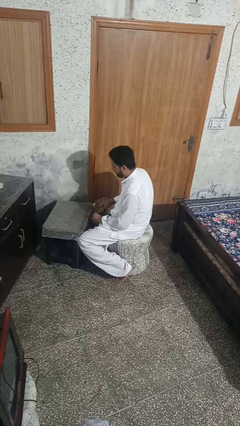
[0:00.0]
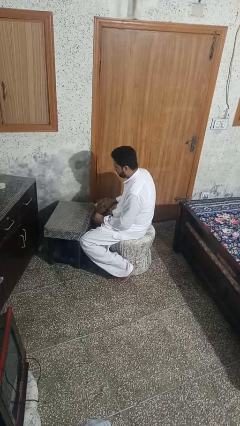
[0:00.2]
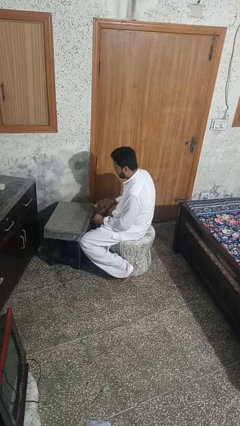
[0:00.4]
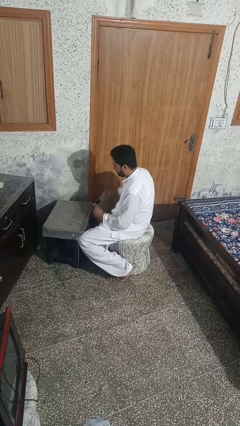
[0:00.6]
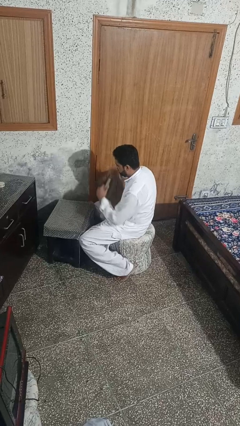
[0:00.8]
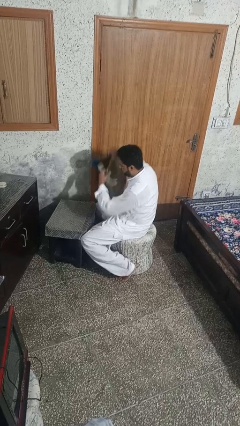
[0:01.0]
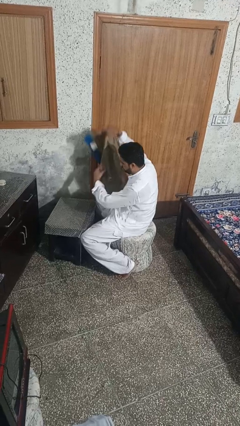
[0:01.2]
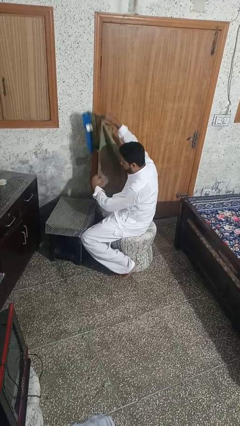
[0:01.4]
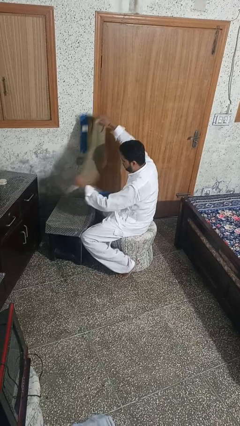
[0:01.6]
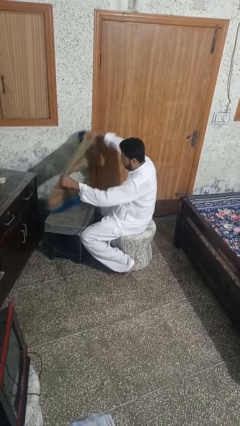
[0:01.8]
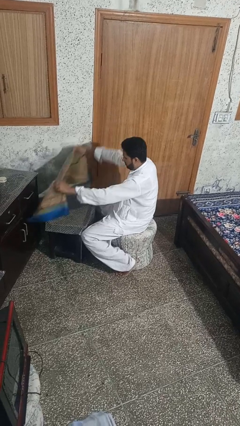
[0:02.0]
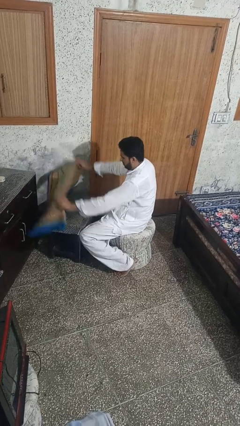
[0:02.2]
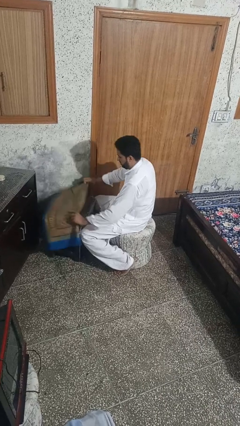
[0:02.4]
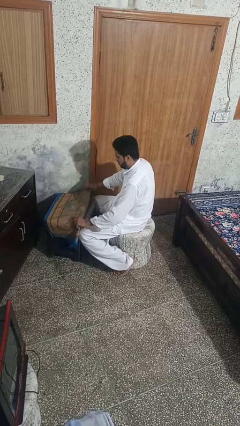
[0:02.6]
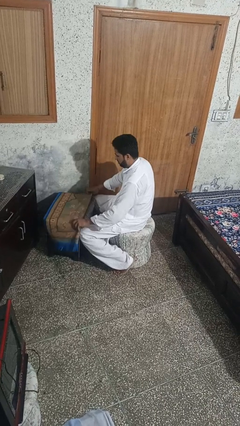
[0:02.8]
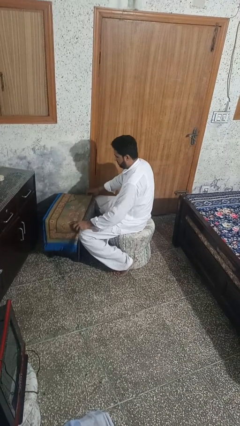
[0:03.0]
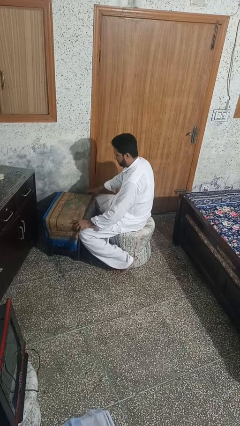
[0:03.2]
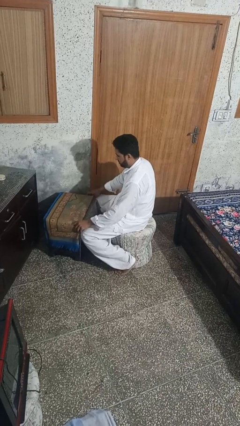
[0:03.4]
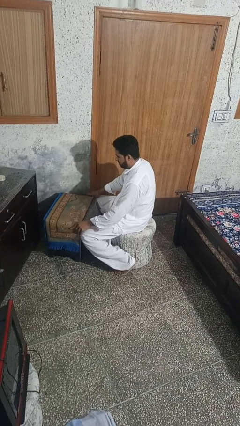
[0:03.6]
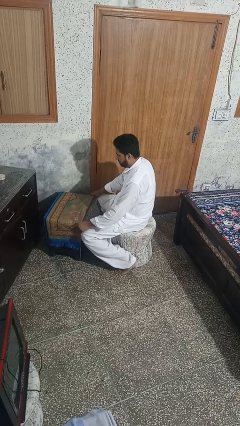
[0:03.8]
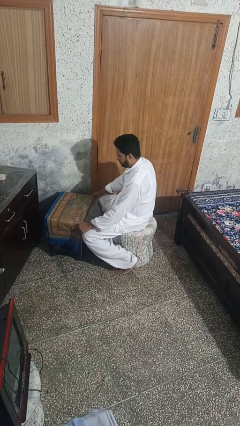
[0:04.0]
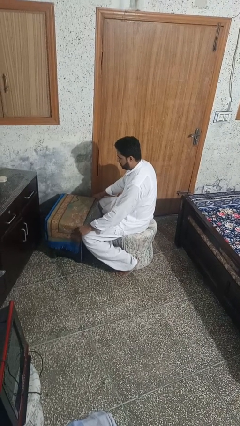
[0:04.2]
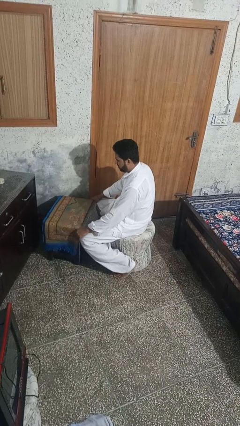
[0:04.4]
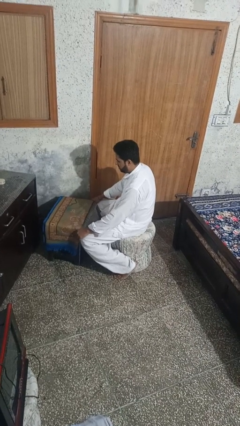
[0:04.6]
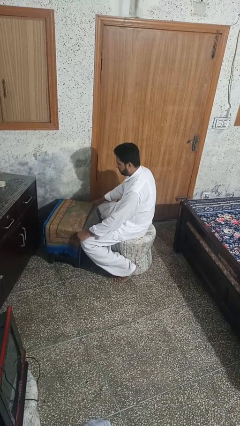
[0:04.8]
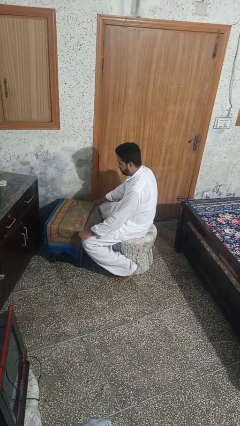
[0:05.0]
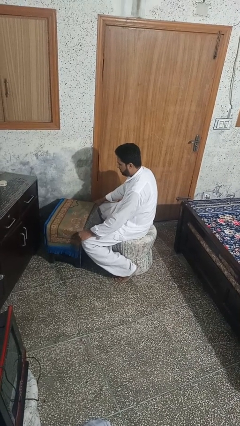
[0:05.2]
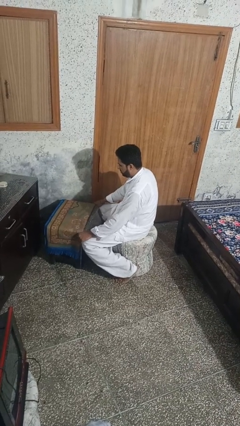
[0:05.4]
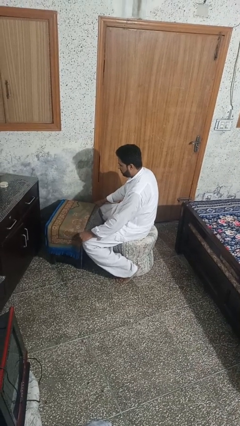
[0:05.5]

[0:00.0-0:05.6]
person spreads tablecloth

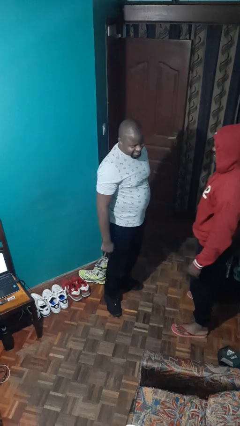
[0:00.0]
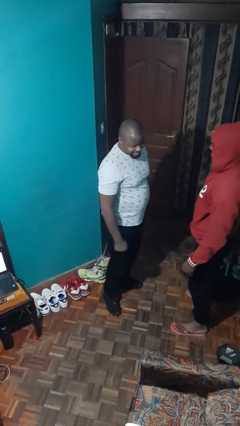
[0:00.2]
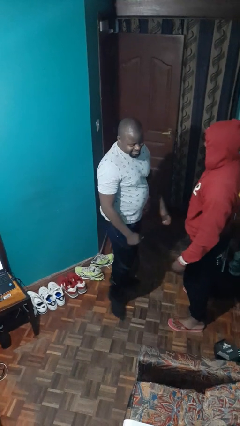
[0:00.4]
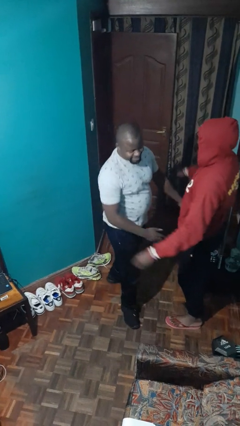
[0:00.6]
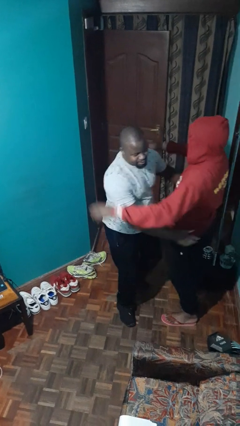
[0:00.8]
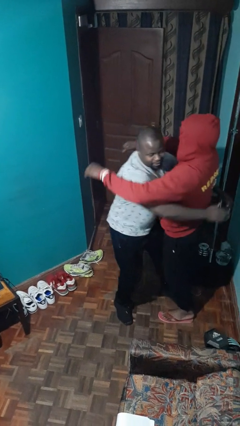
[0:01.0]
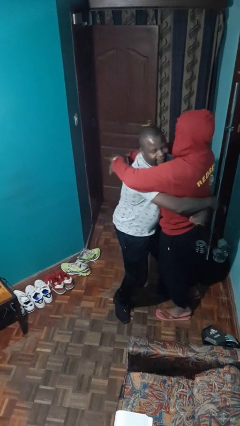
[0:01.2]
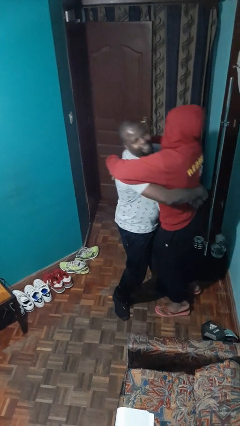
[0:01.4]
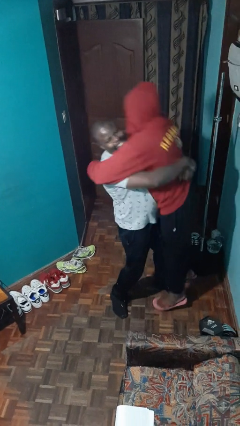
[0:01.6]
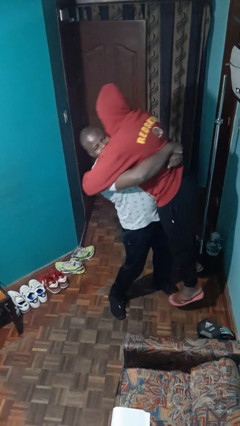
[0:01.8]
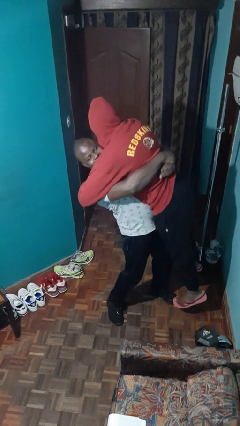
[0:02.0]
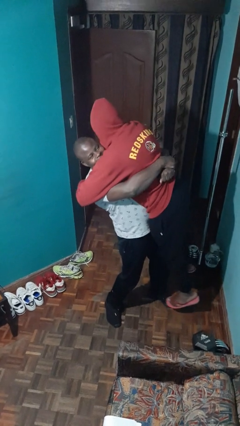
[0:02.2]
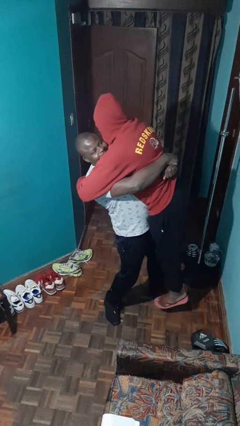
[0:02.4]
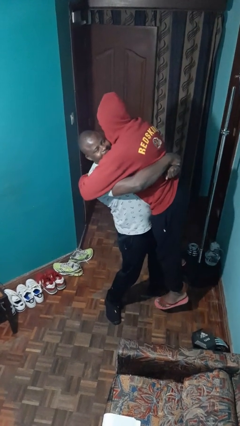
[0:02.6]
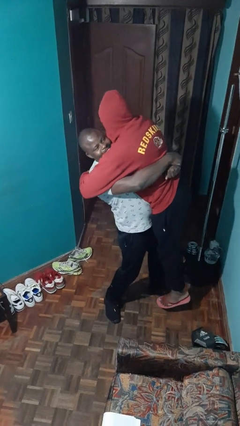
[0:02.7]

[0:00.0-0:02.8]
person picks up person

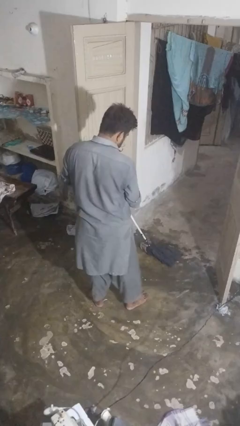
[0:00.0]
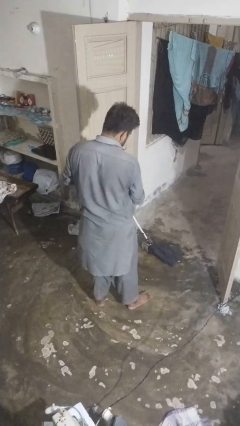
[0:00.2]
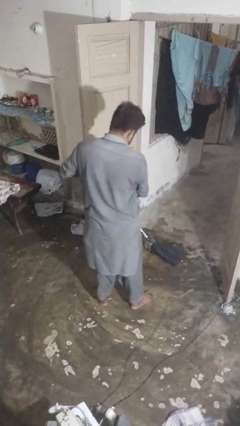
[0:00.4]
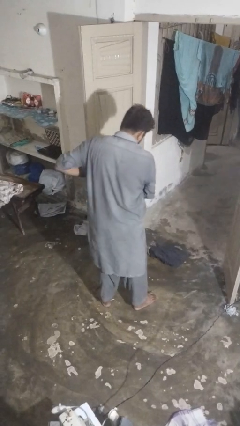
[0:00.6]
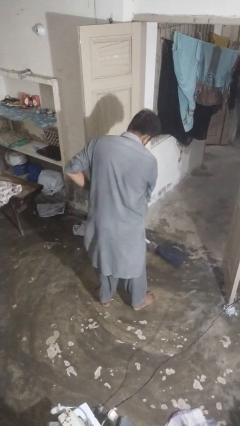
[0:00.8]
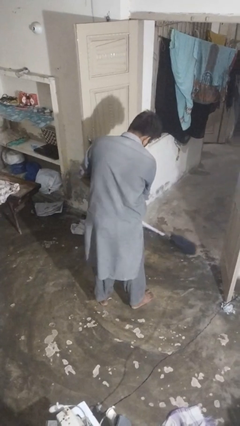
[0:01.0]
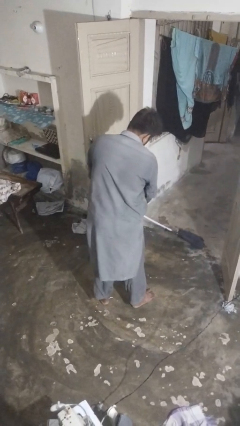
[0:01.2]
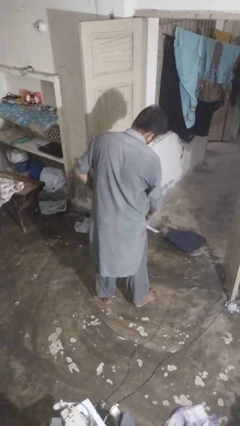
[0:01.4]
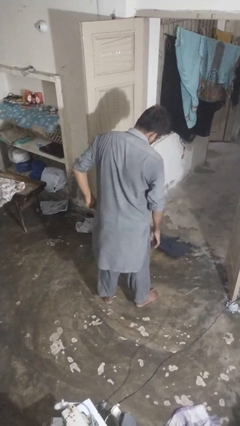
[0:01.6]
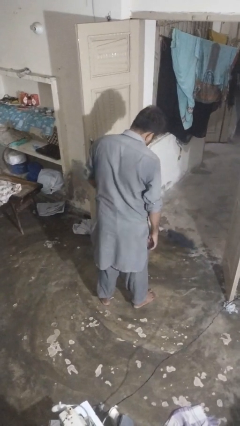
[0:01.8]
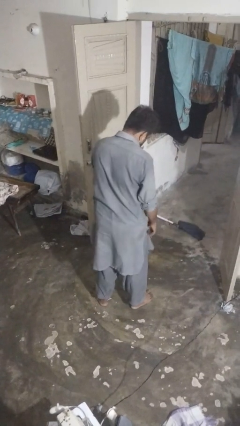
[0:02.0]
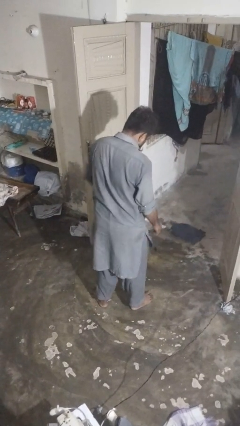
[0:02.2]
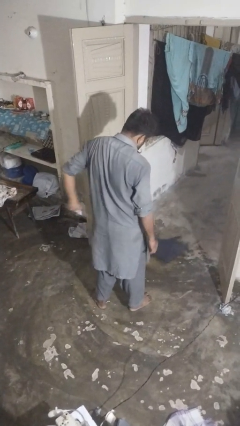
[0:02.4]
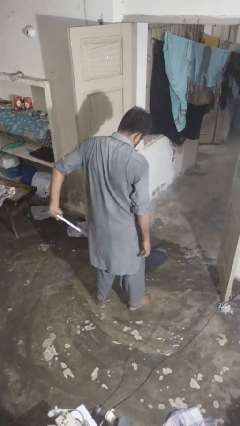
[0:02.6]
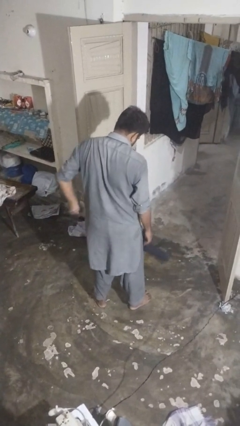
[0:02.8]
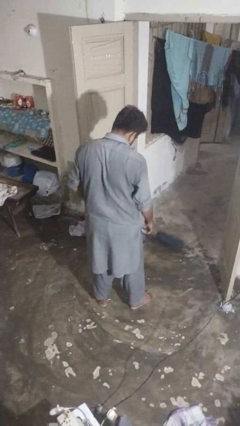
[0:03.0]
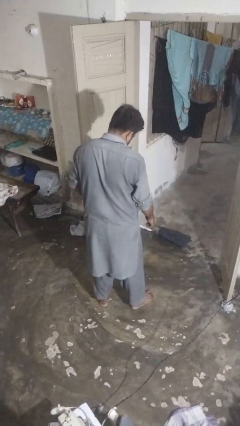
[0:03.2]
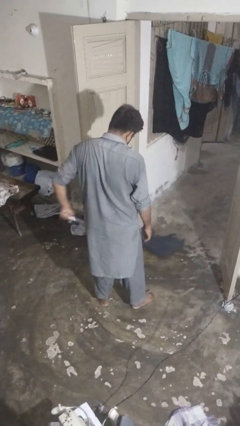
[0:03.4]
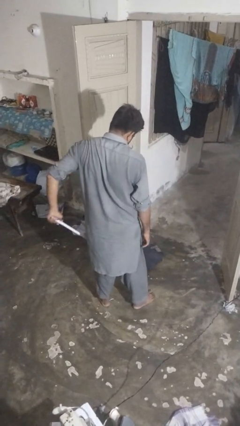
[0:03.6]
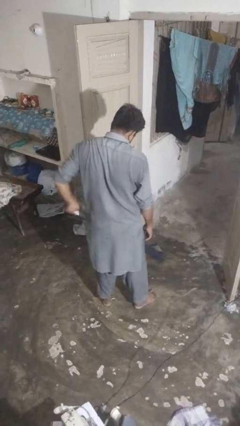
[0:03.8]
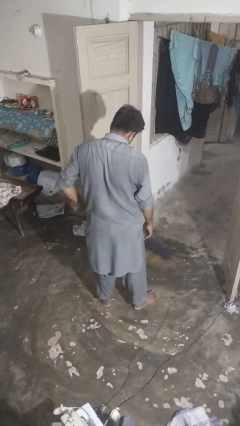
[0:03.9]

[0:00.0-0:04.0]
person mops

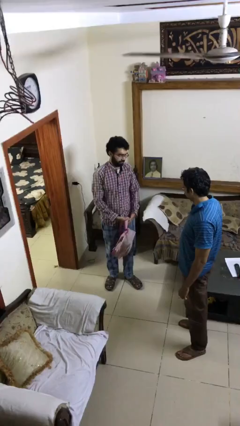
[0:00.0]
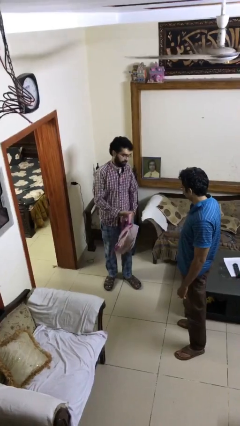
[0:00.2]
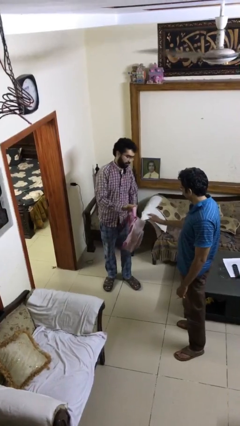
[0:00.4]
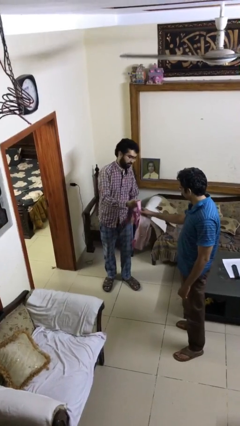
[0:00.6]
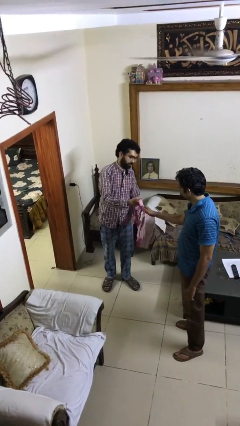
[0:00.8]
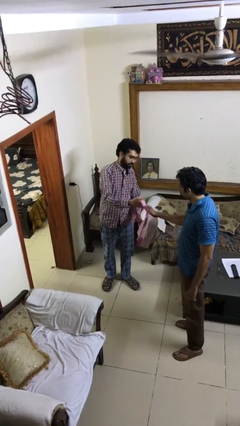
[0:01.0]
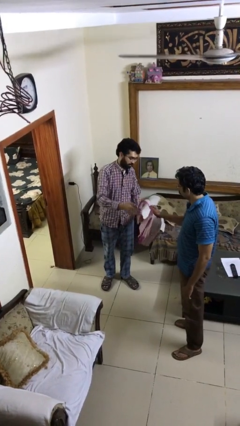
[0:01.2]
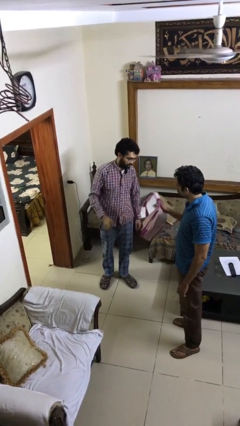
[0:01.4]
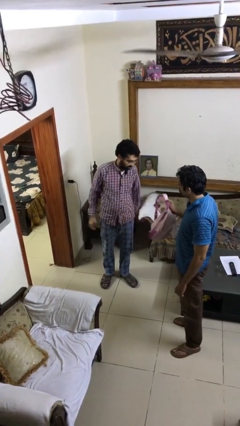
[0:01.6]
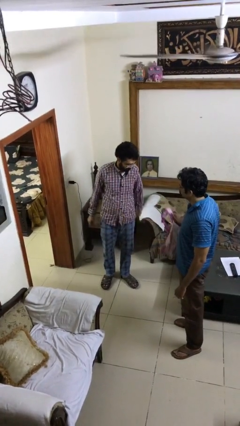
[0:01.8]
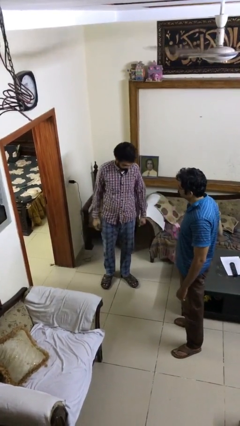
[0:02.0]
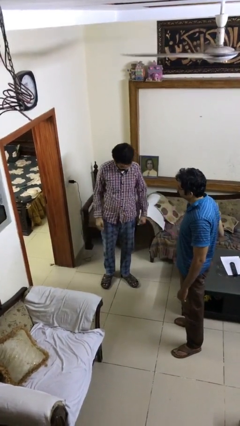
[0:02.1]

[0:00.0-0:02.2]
person transfers object to person

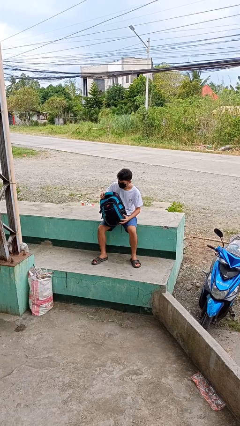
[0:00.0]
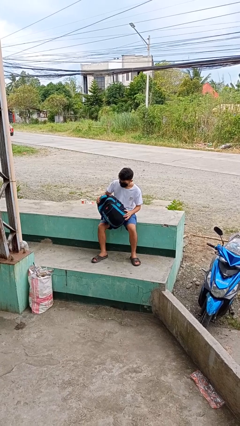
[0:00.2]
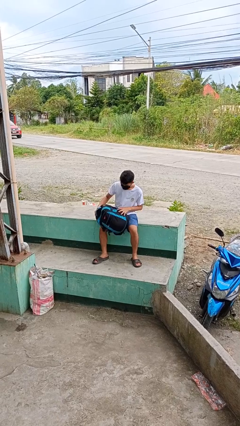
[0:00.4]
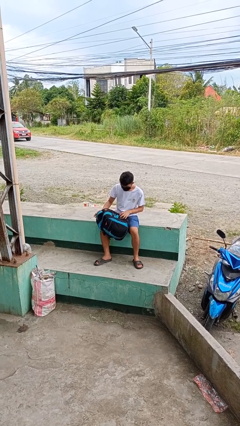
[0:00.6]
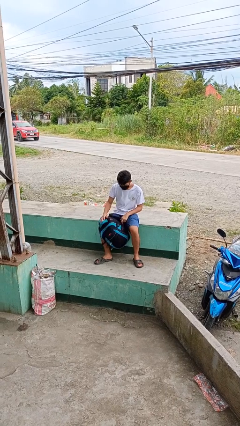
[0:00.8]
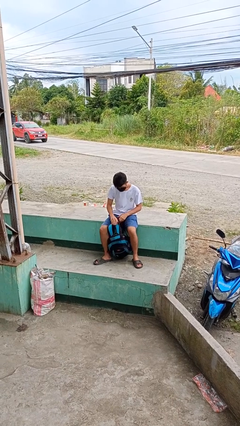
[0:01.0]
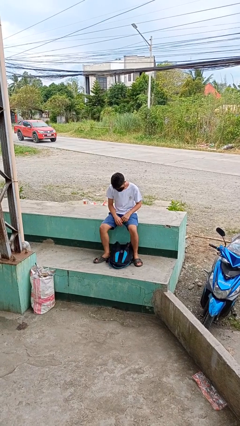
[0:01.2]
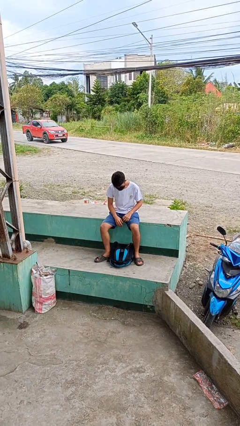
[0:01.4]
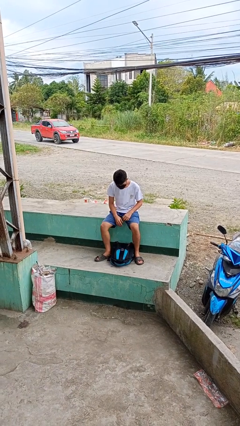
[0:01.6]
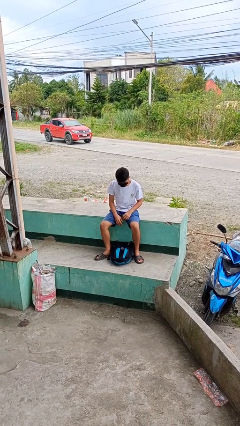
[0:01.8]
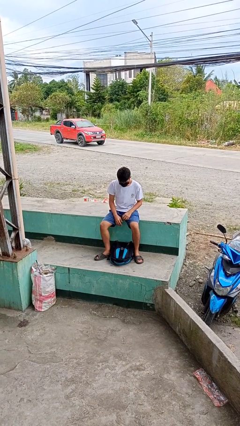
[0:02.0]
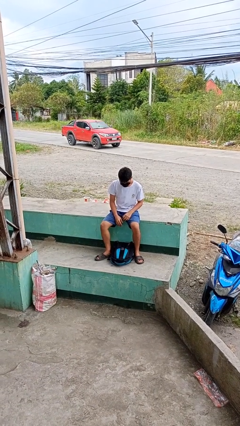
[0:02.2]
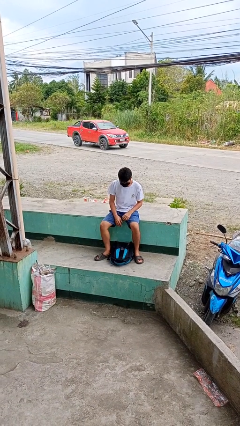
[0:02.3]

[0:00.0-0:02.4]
person drops object

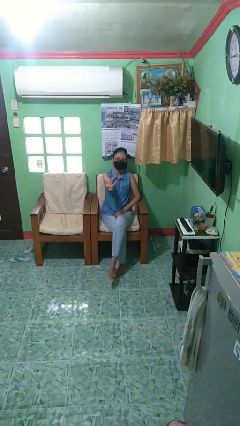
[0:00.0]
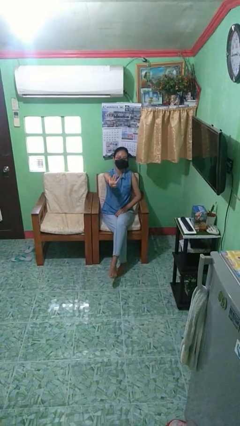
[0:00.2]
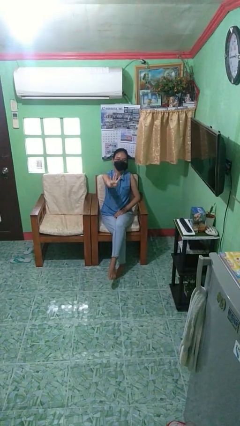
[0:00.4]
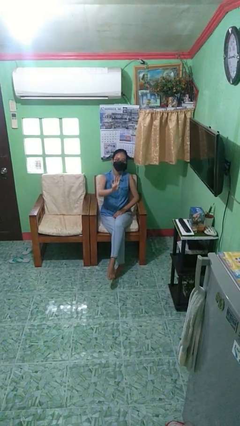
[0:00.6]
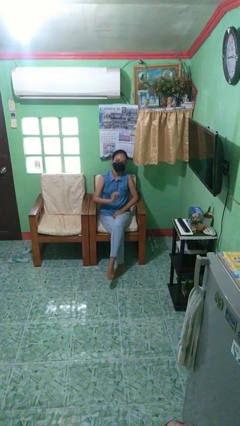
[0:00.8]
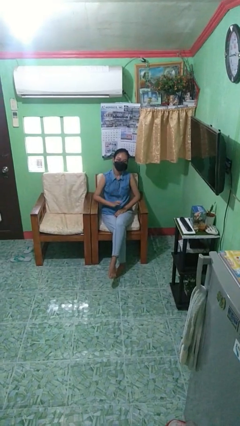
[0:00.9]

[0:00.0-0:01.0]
person gestures number four
